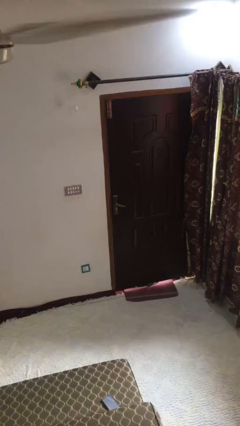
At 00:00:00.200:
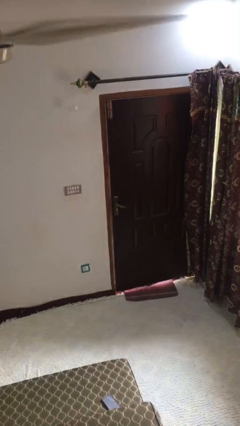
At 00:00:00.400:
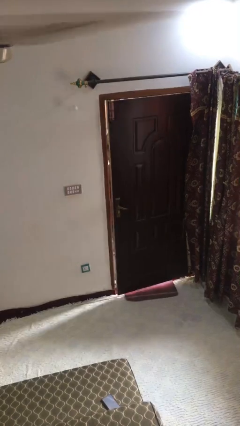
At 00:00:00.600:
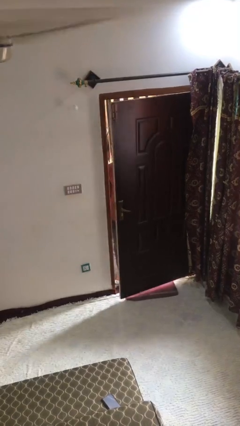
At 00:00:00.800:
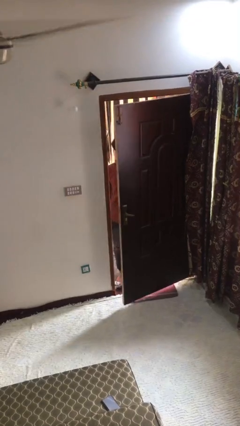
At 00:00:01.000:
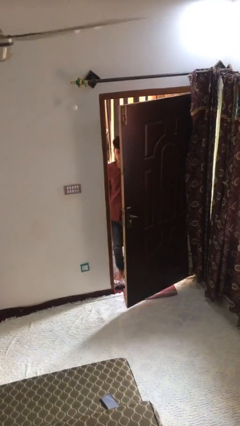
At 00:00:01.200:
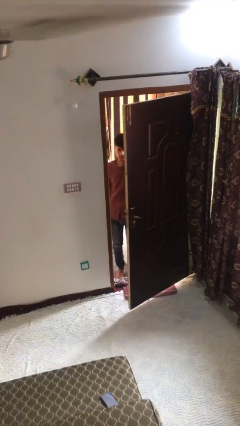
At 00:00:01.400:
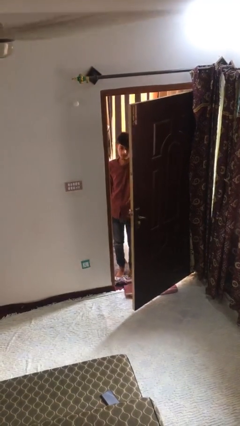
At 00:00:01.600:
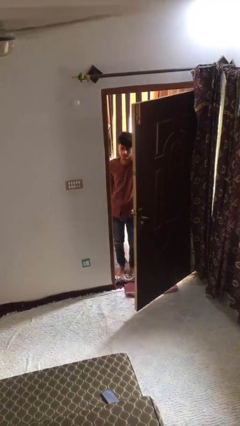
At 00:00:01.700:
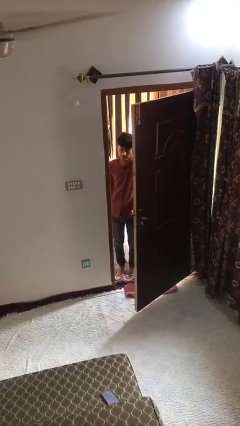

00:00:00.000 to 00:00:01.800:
person opens facility door

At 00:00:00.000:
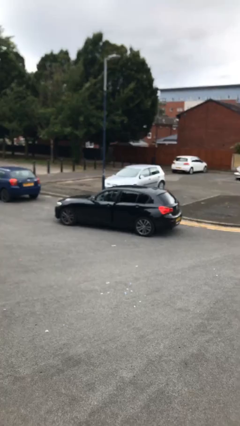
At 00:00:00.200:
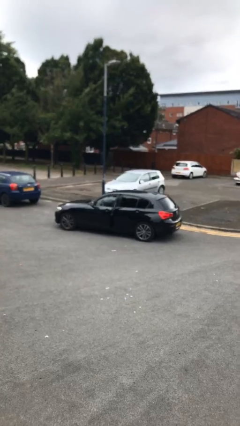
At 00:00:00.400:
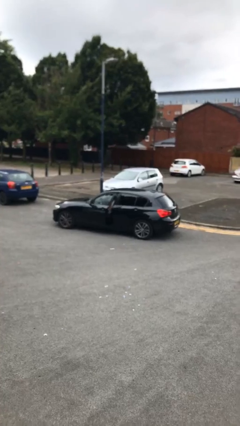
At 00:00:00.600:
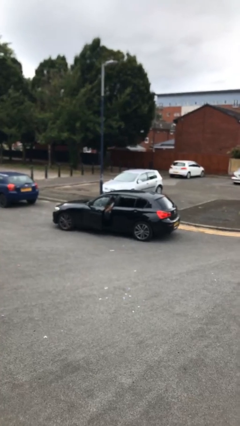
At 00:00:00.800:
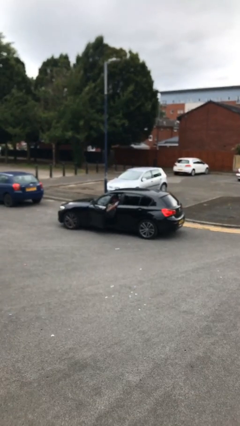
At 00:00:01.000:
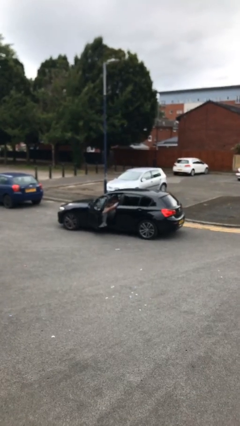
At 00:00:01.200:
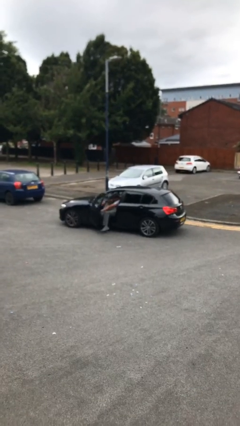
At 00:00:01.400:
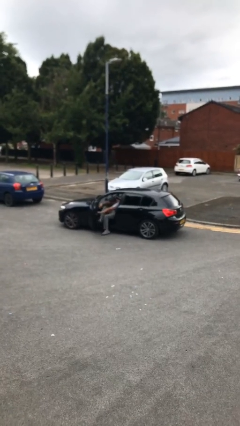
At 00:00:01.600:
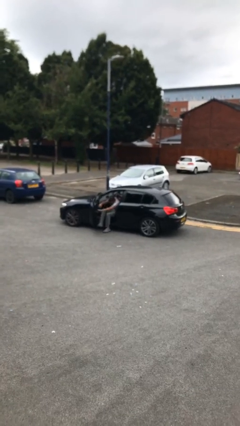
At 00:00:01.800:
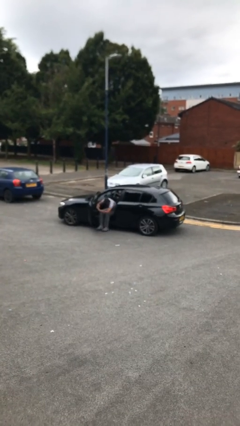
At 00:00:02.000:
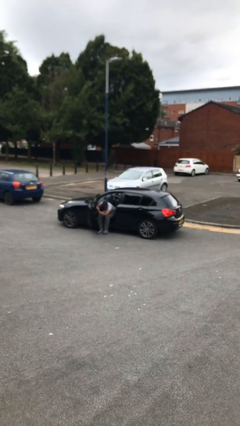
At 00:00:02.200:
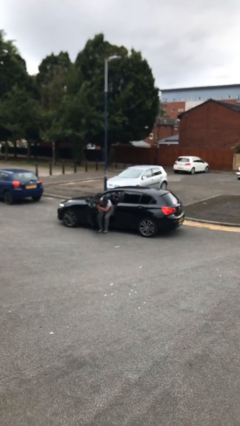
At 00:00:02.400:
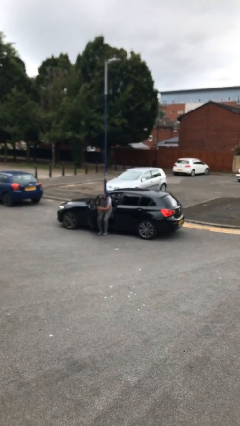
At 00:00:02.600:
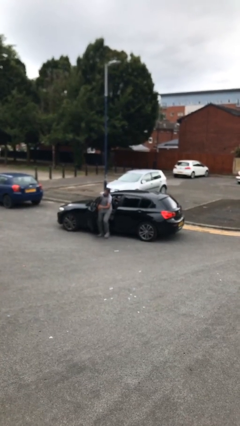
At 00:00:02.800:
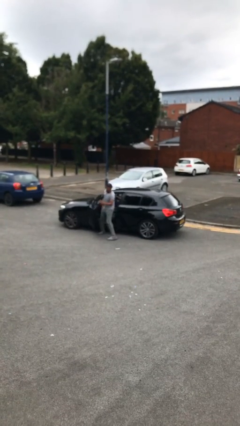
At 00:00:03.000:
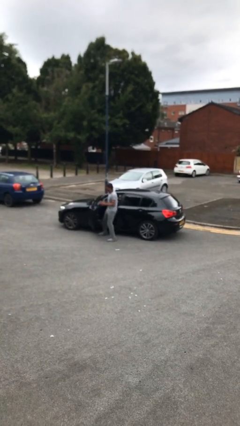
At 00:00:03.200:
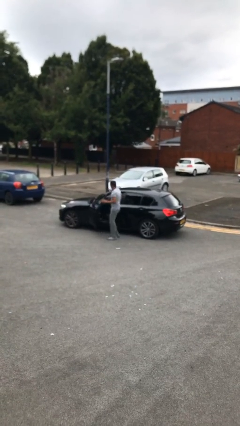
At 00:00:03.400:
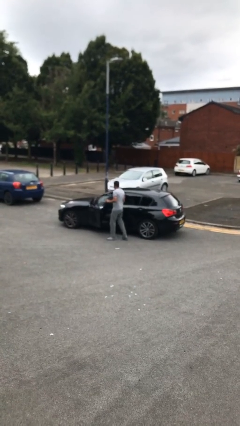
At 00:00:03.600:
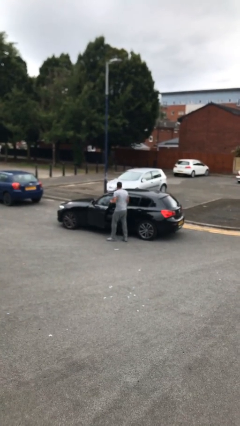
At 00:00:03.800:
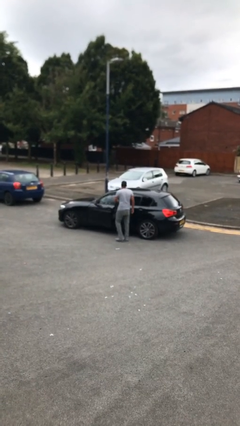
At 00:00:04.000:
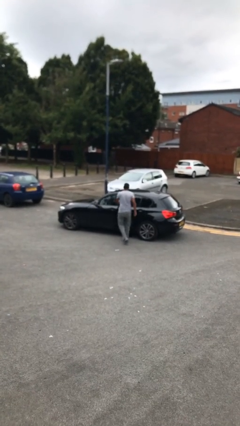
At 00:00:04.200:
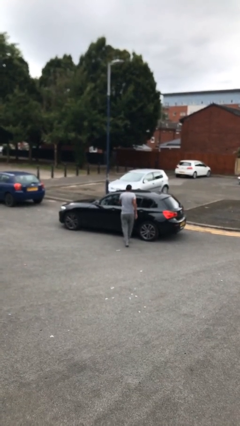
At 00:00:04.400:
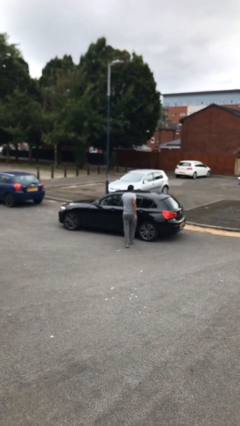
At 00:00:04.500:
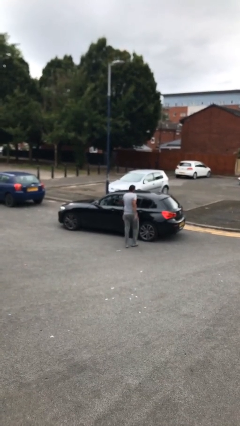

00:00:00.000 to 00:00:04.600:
car drops off person

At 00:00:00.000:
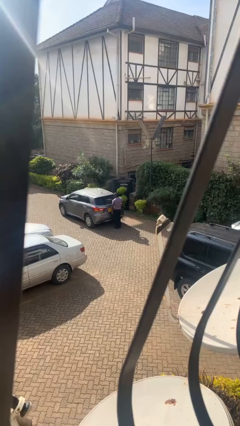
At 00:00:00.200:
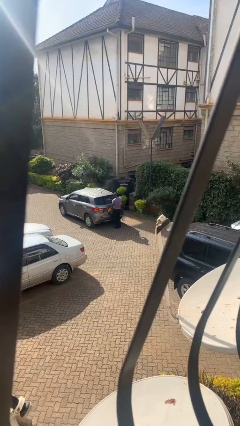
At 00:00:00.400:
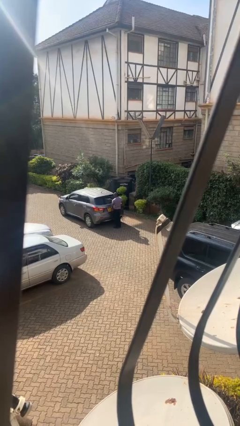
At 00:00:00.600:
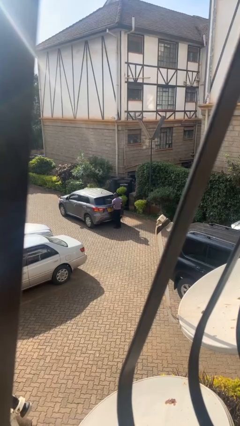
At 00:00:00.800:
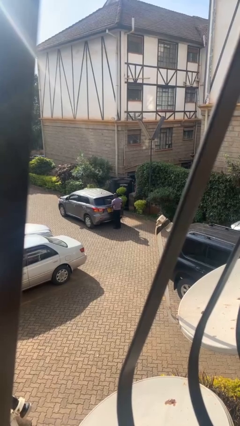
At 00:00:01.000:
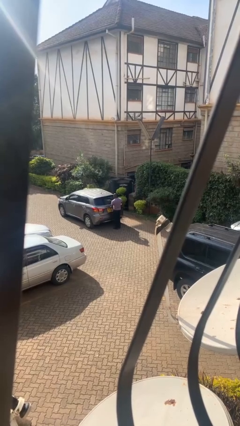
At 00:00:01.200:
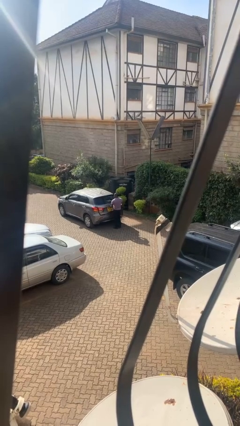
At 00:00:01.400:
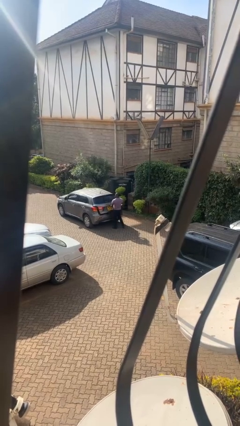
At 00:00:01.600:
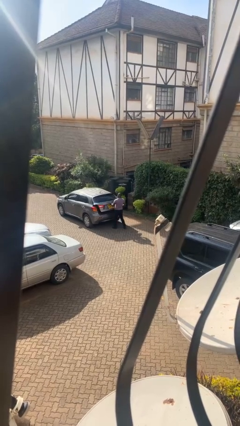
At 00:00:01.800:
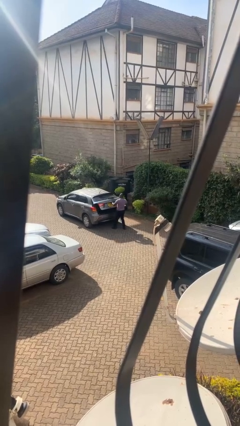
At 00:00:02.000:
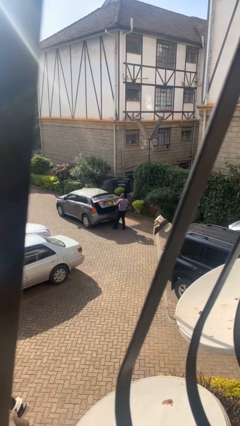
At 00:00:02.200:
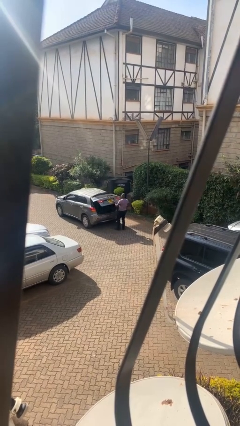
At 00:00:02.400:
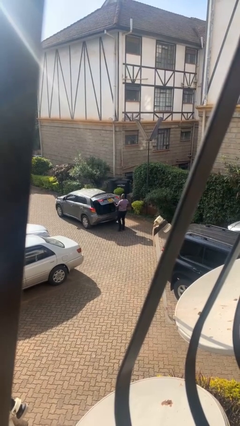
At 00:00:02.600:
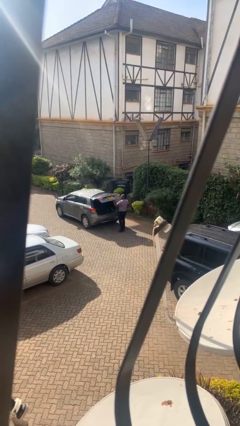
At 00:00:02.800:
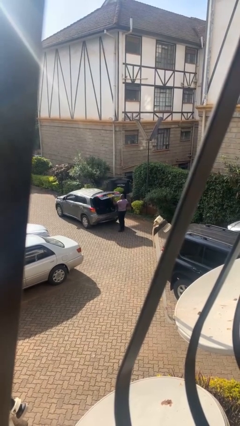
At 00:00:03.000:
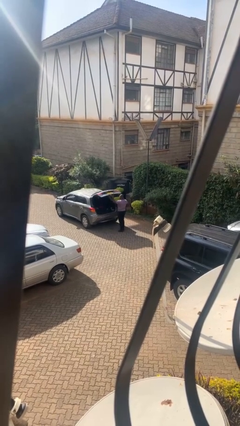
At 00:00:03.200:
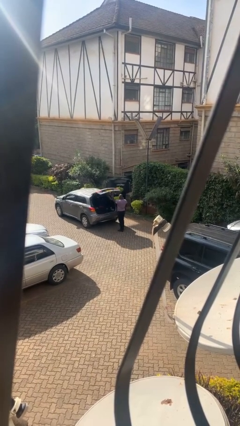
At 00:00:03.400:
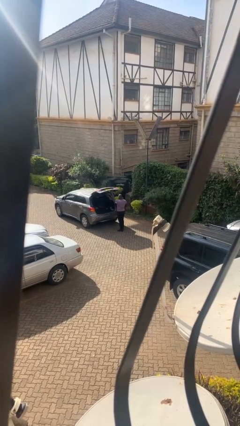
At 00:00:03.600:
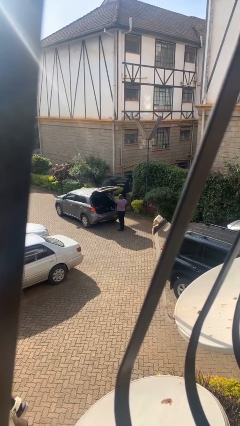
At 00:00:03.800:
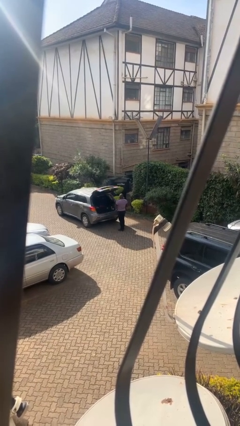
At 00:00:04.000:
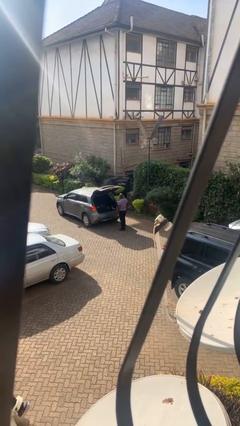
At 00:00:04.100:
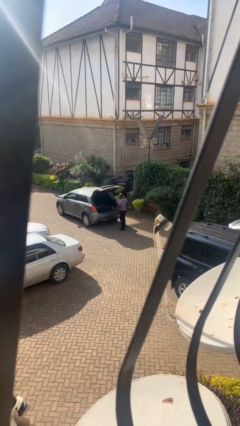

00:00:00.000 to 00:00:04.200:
person opens car trunk

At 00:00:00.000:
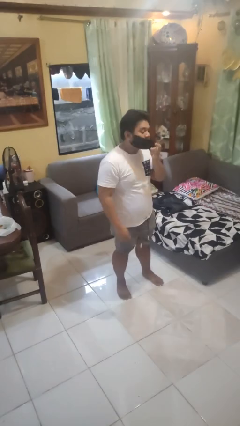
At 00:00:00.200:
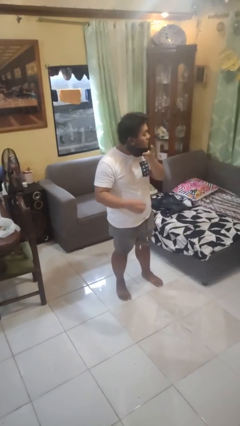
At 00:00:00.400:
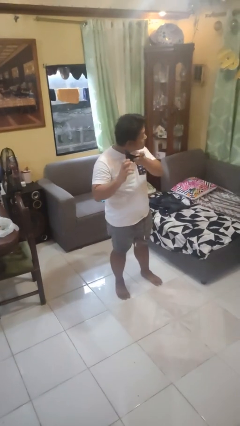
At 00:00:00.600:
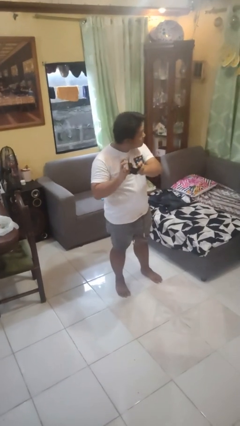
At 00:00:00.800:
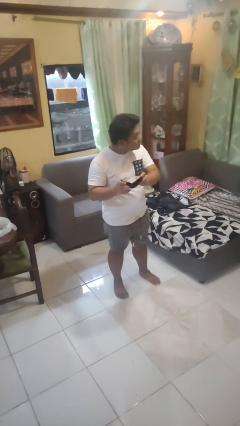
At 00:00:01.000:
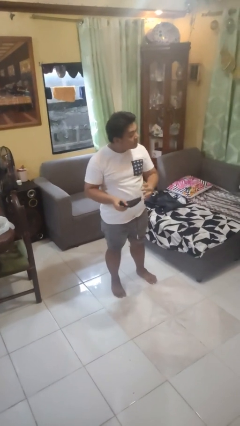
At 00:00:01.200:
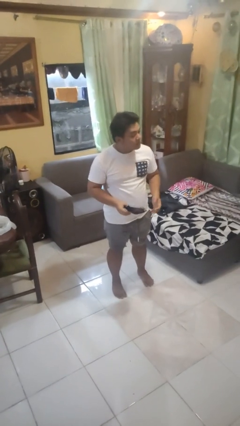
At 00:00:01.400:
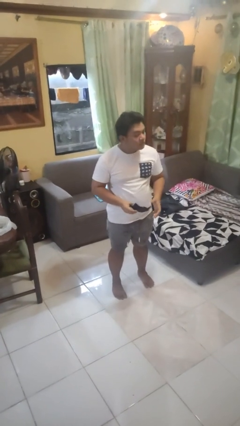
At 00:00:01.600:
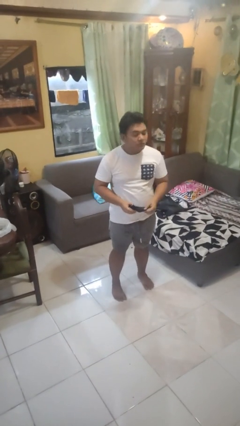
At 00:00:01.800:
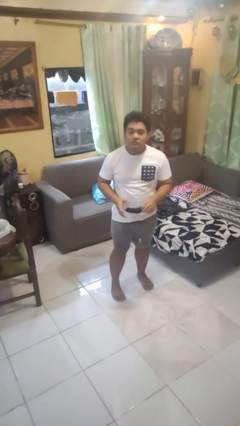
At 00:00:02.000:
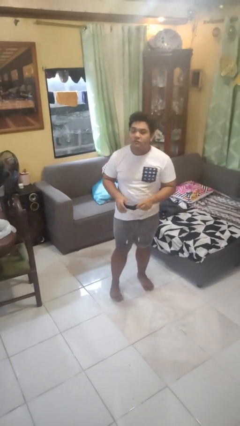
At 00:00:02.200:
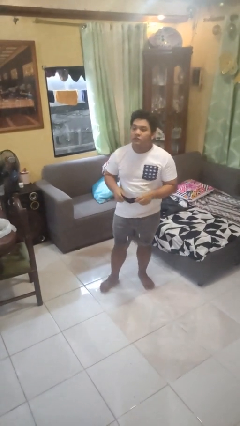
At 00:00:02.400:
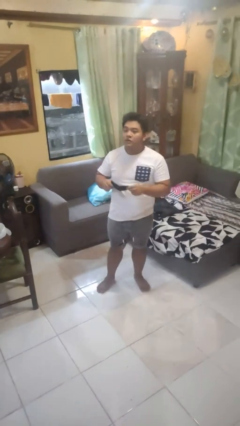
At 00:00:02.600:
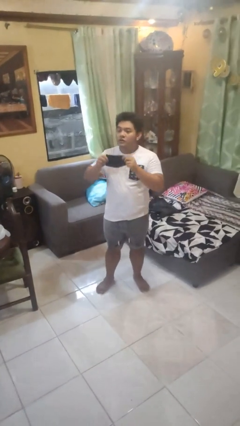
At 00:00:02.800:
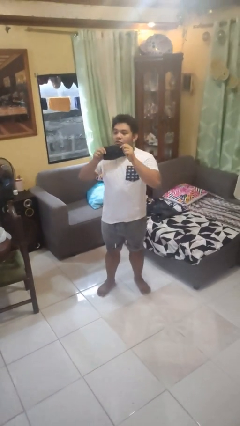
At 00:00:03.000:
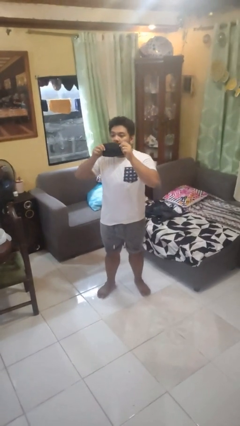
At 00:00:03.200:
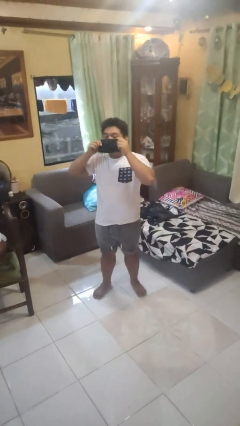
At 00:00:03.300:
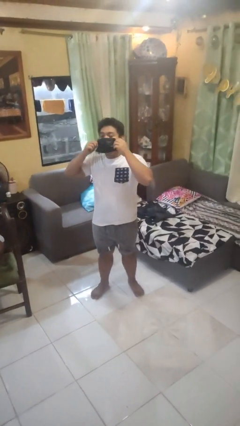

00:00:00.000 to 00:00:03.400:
person takes off facemask

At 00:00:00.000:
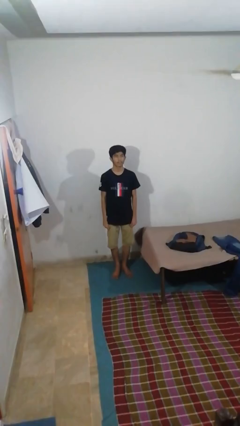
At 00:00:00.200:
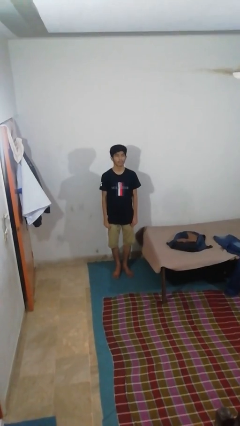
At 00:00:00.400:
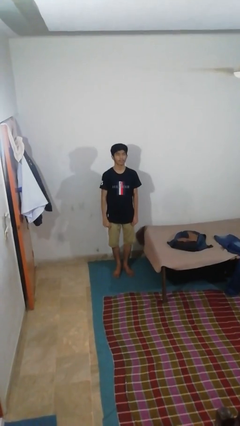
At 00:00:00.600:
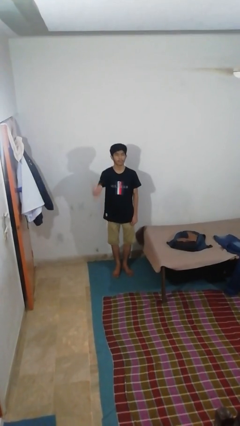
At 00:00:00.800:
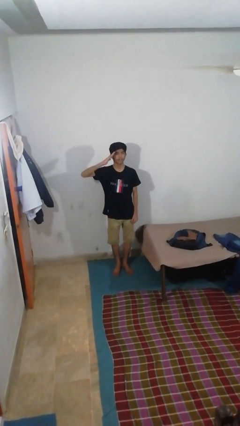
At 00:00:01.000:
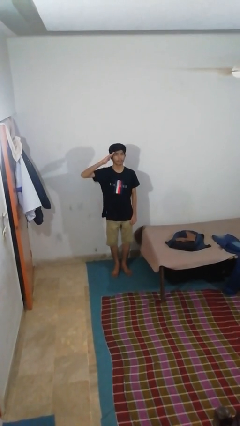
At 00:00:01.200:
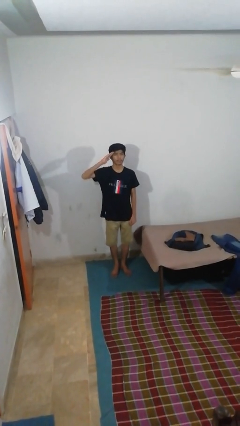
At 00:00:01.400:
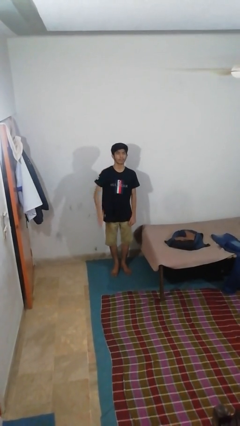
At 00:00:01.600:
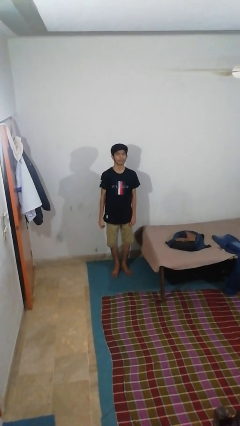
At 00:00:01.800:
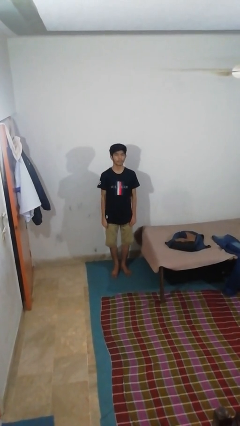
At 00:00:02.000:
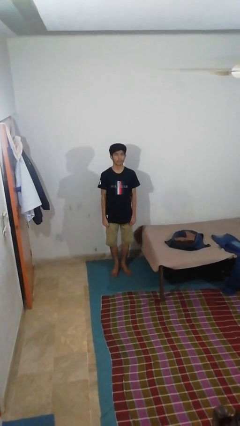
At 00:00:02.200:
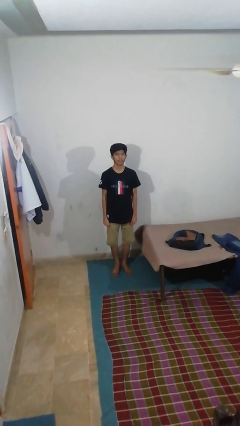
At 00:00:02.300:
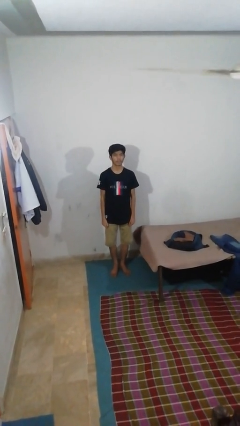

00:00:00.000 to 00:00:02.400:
person salutes

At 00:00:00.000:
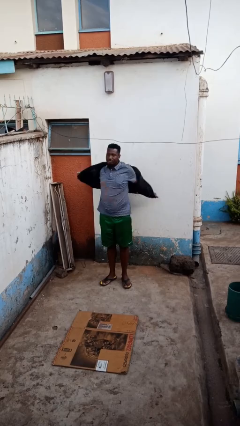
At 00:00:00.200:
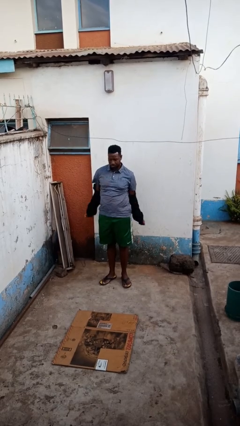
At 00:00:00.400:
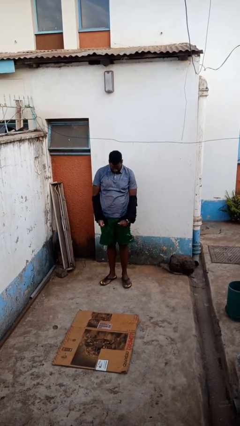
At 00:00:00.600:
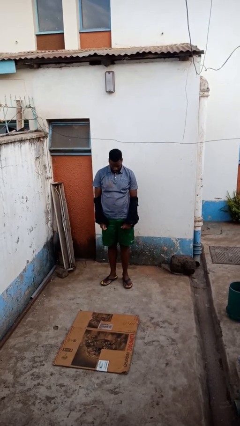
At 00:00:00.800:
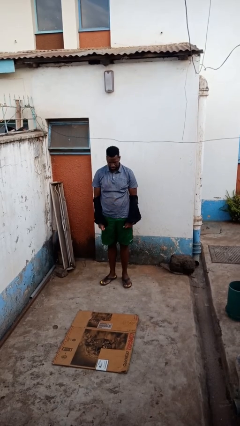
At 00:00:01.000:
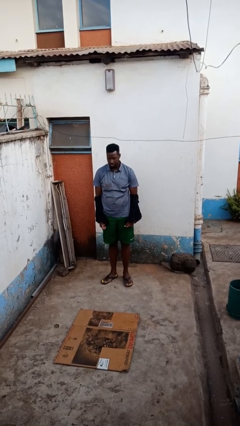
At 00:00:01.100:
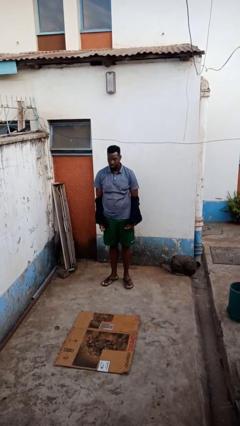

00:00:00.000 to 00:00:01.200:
person takes off jacket
